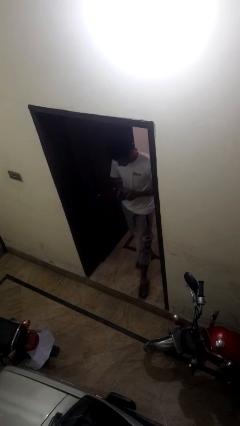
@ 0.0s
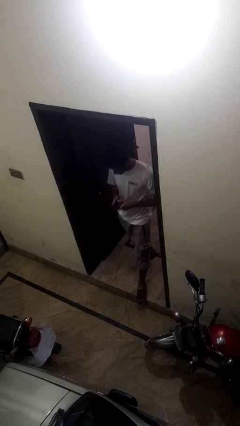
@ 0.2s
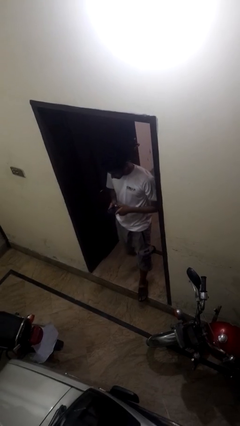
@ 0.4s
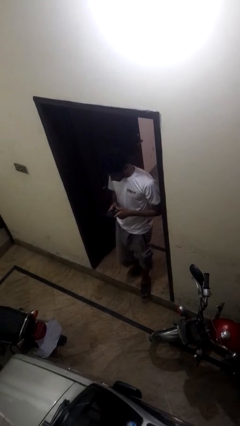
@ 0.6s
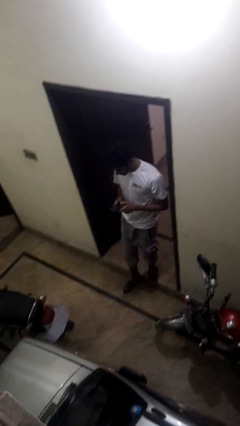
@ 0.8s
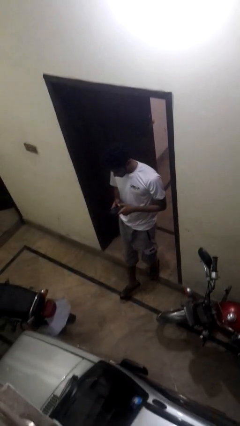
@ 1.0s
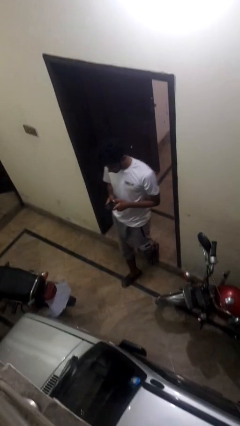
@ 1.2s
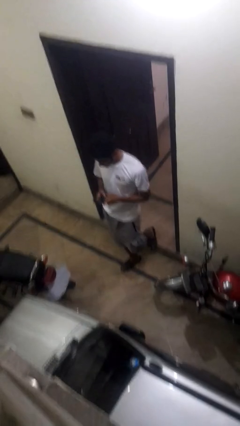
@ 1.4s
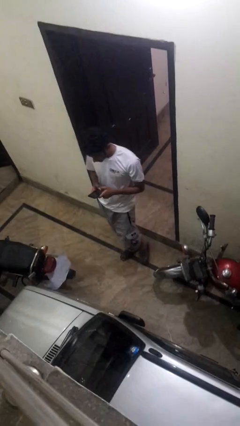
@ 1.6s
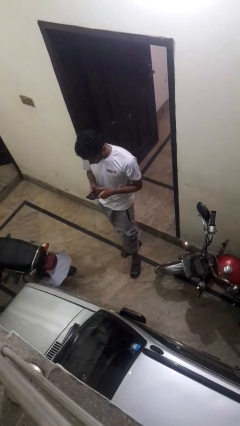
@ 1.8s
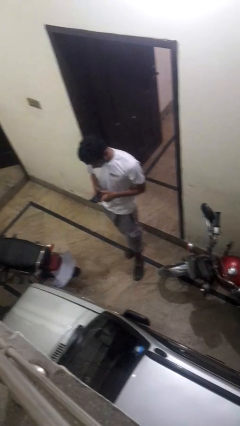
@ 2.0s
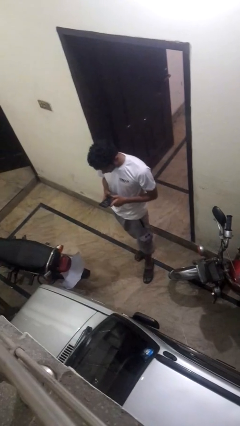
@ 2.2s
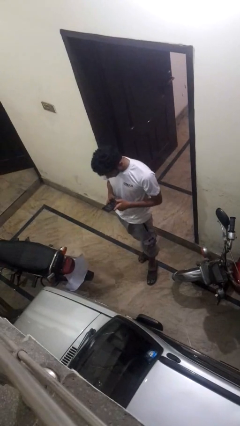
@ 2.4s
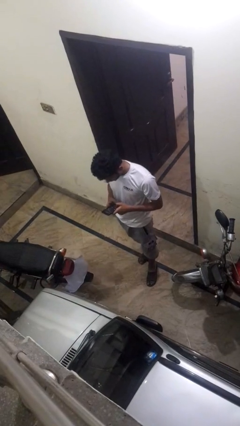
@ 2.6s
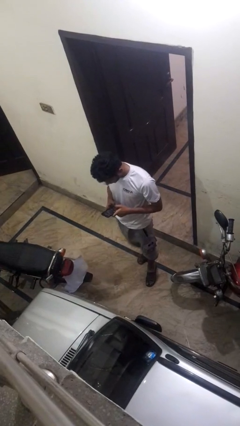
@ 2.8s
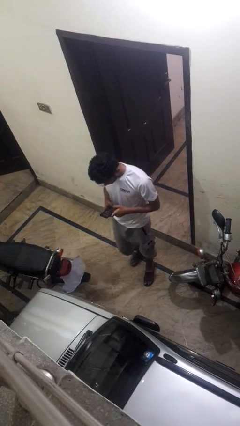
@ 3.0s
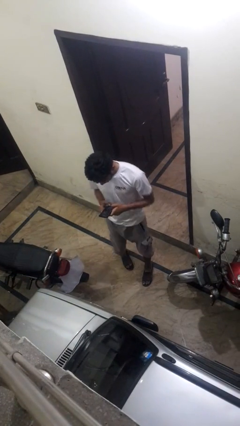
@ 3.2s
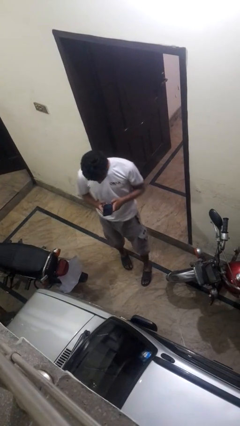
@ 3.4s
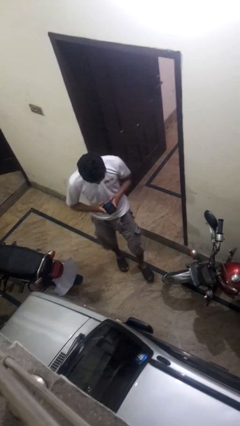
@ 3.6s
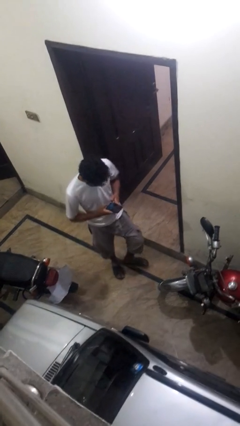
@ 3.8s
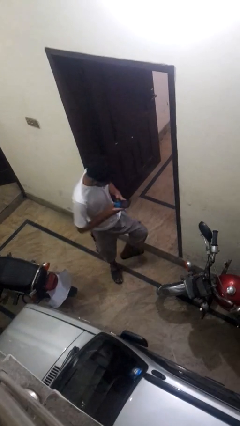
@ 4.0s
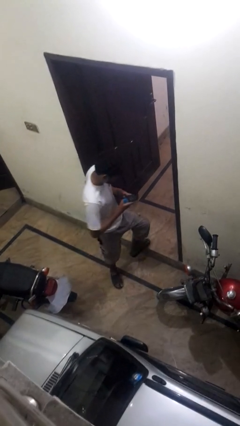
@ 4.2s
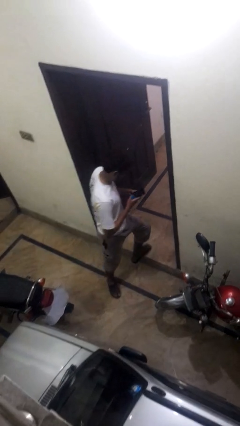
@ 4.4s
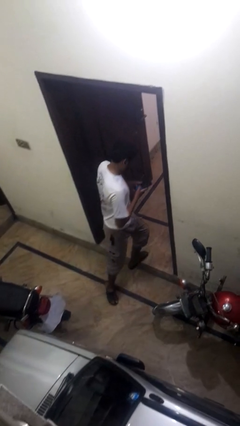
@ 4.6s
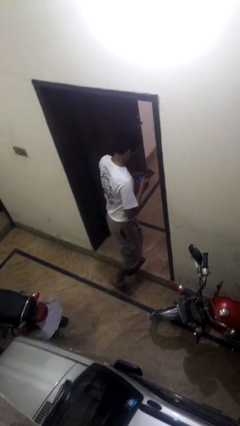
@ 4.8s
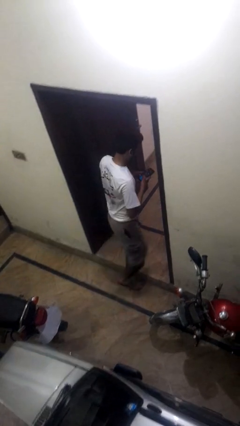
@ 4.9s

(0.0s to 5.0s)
person enters scene through structure

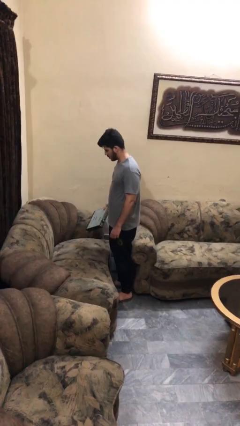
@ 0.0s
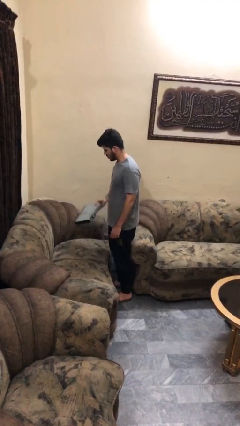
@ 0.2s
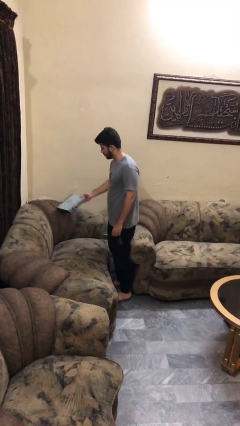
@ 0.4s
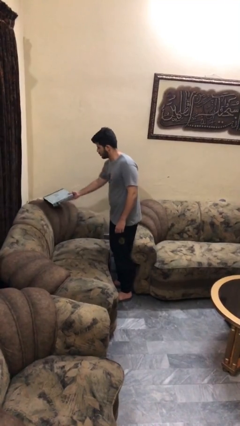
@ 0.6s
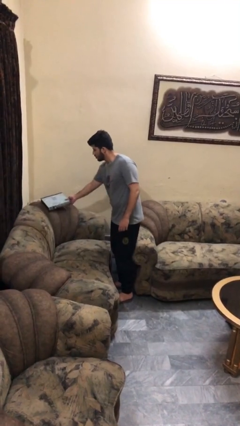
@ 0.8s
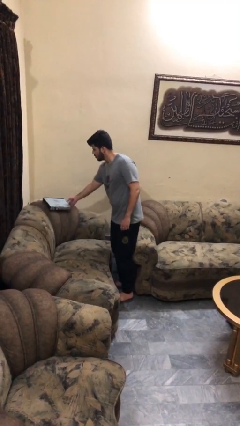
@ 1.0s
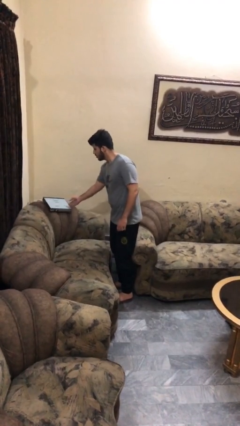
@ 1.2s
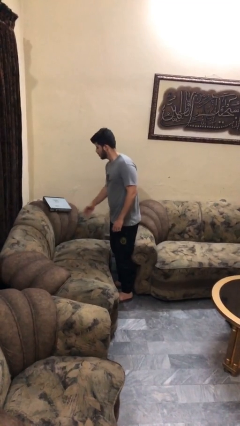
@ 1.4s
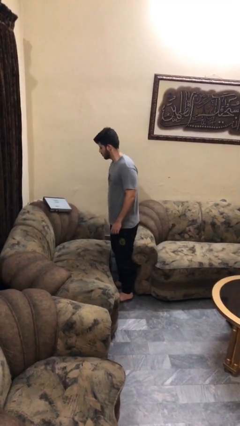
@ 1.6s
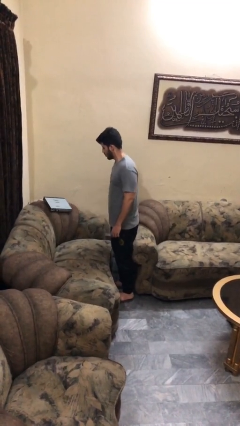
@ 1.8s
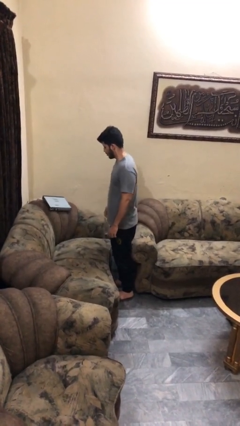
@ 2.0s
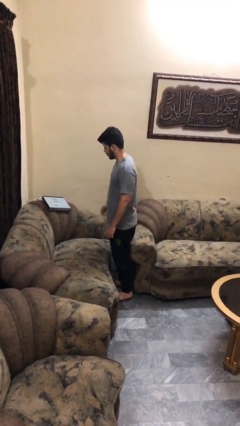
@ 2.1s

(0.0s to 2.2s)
person puts down object on couch

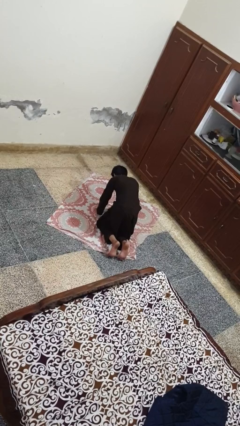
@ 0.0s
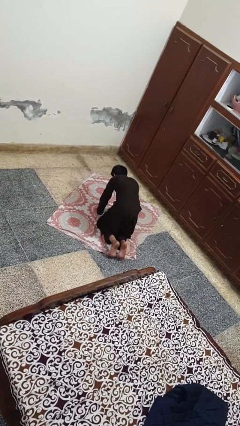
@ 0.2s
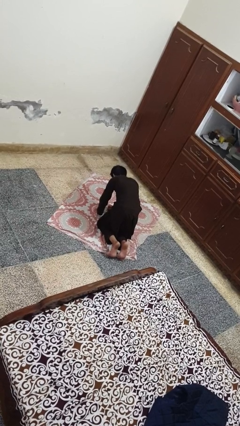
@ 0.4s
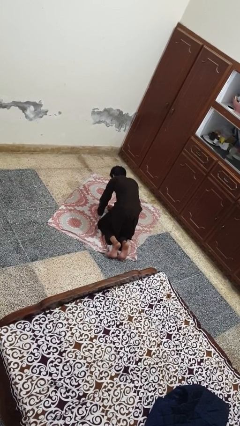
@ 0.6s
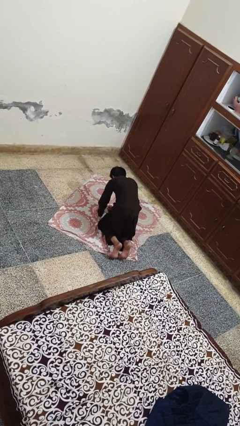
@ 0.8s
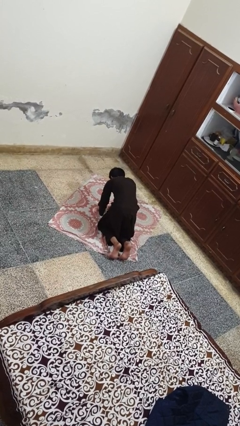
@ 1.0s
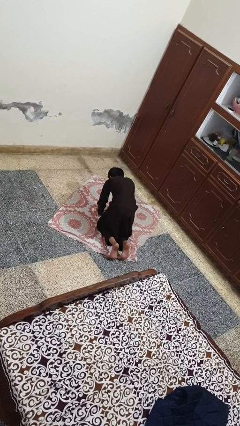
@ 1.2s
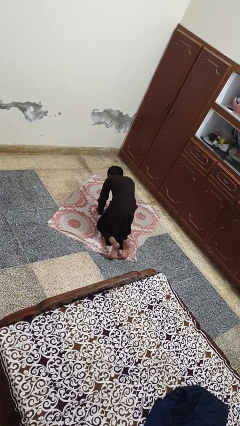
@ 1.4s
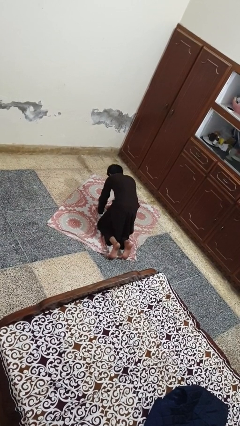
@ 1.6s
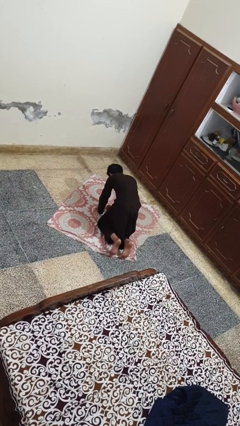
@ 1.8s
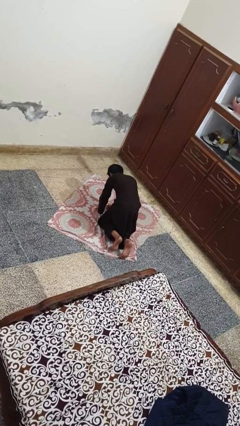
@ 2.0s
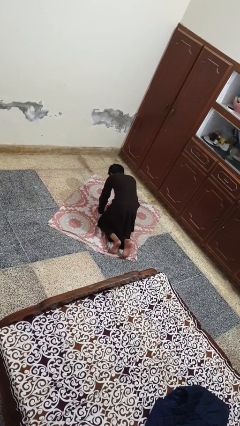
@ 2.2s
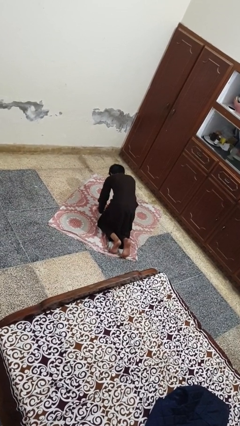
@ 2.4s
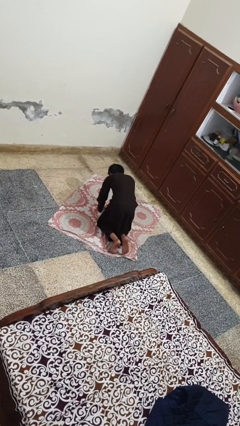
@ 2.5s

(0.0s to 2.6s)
person crawls

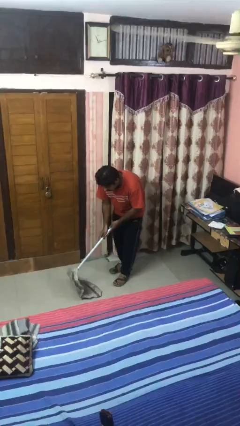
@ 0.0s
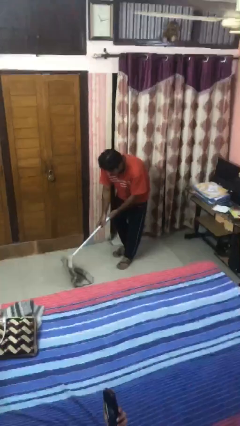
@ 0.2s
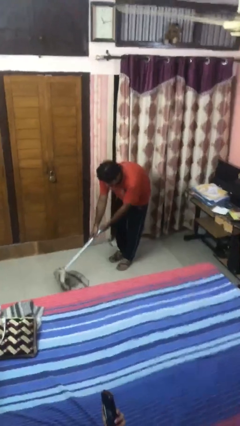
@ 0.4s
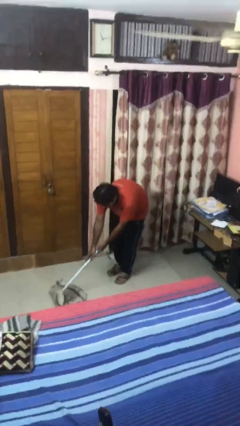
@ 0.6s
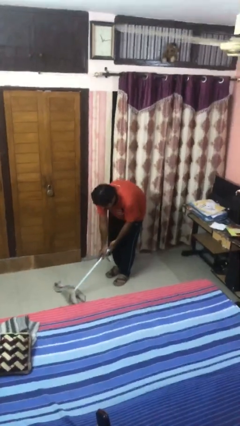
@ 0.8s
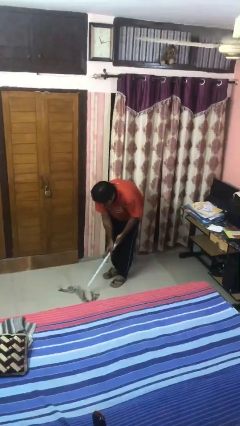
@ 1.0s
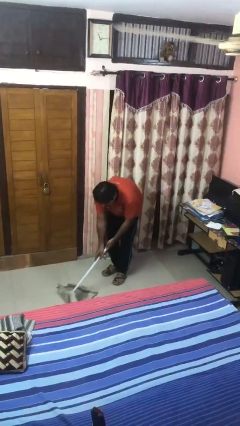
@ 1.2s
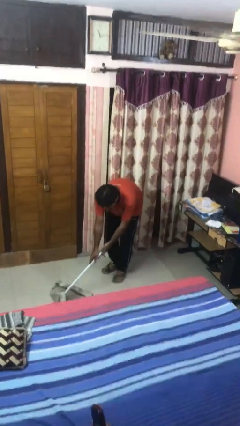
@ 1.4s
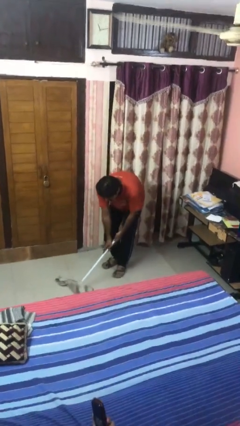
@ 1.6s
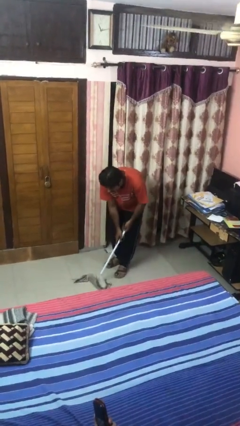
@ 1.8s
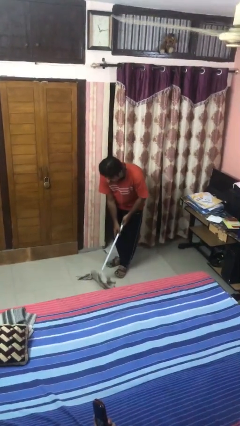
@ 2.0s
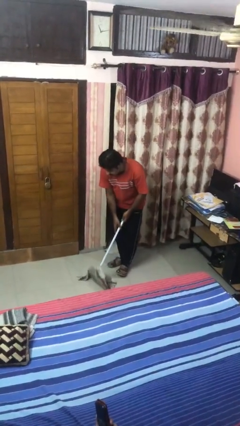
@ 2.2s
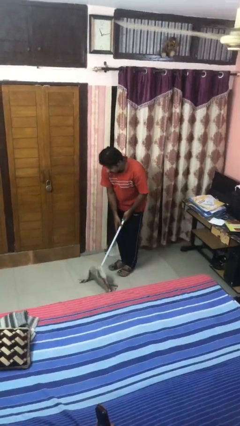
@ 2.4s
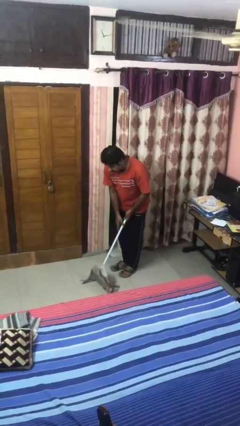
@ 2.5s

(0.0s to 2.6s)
person mops

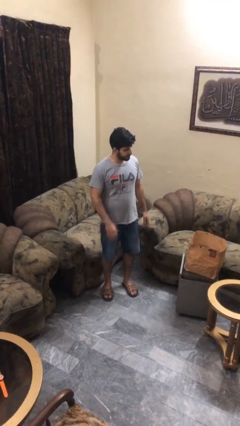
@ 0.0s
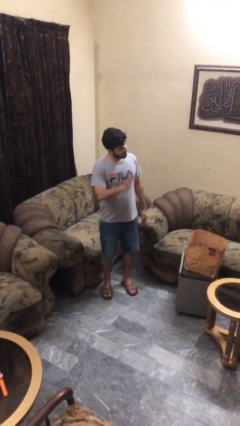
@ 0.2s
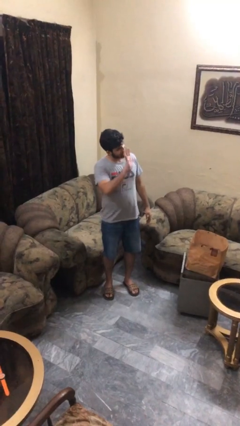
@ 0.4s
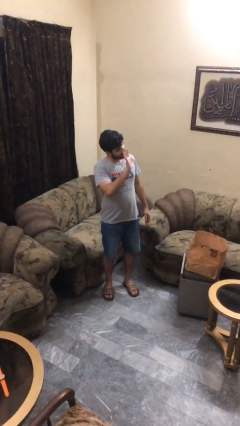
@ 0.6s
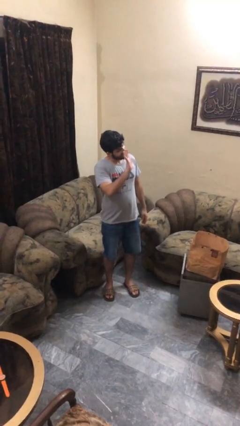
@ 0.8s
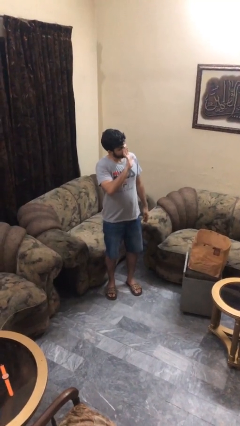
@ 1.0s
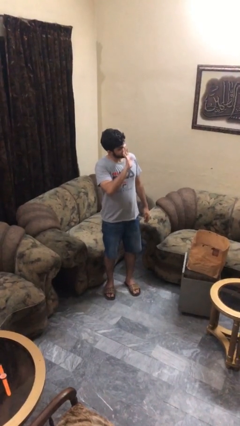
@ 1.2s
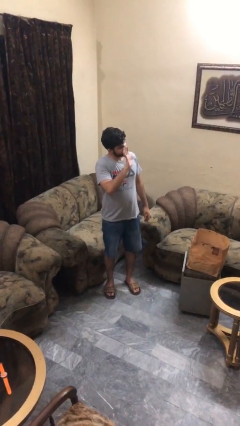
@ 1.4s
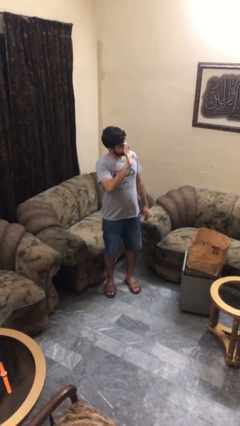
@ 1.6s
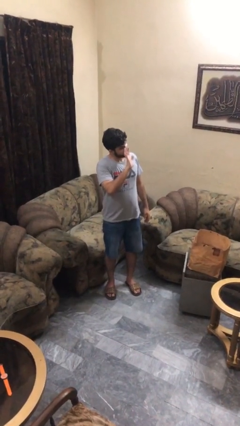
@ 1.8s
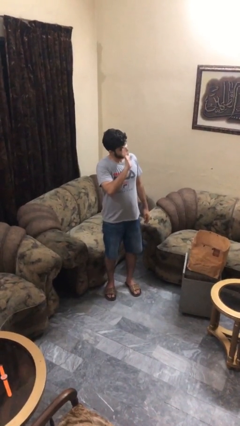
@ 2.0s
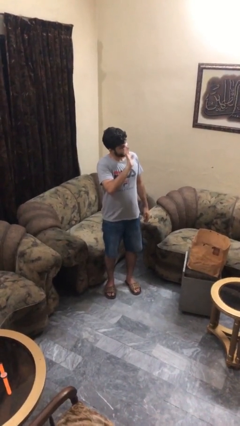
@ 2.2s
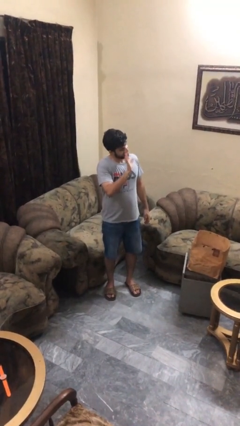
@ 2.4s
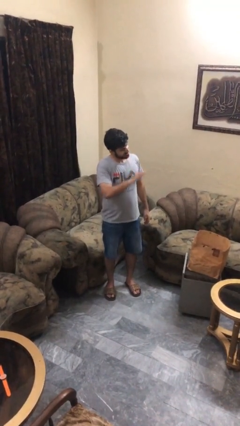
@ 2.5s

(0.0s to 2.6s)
person waves at person

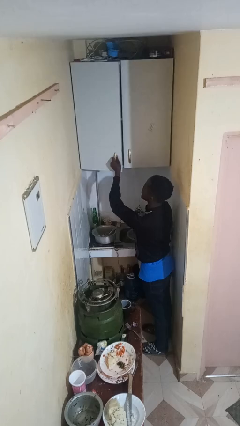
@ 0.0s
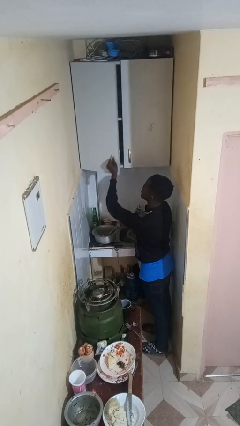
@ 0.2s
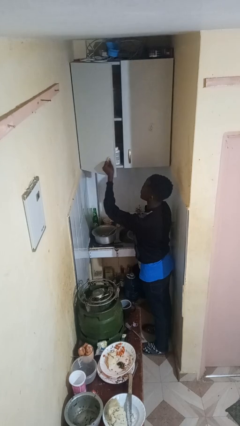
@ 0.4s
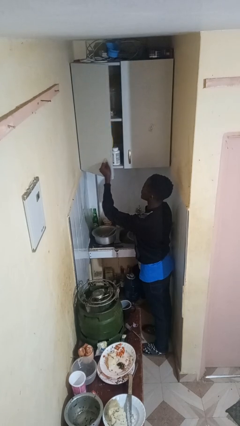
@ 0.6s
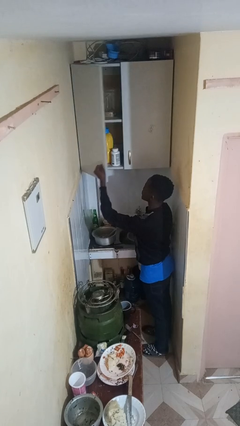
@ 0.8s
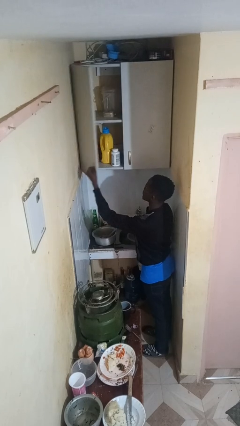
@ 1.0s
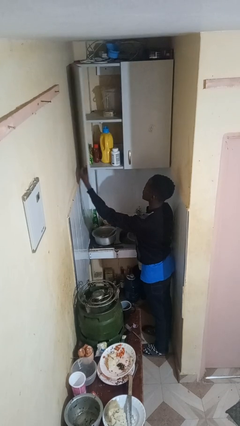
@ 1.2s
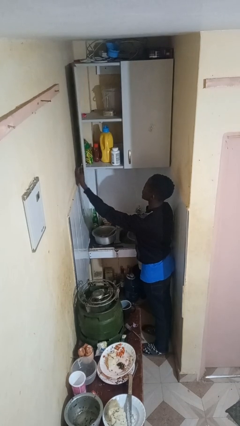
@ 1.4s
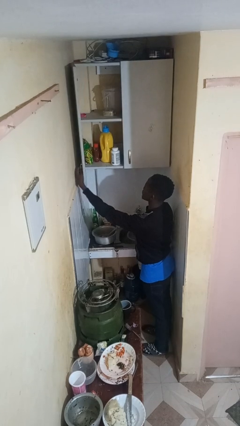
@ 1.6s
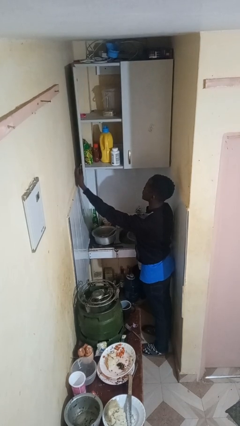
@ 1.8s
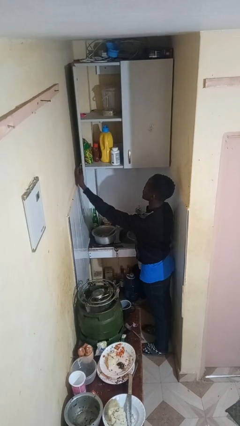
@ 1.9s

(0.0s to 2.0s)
person opens kitchen drawer

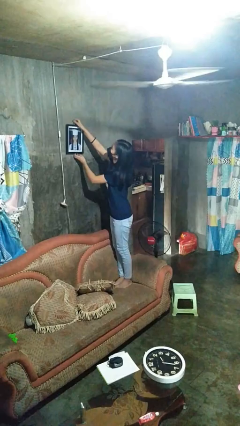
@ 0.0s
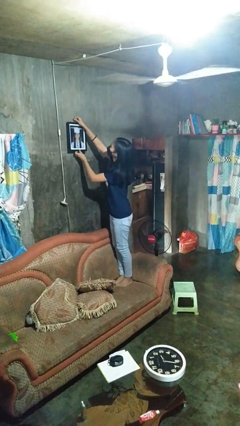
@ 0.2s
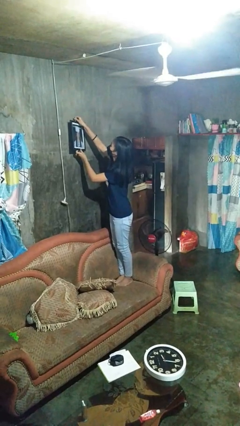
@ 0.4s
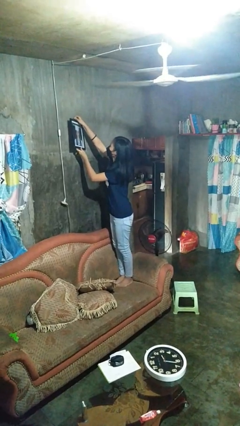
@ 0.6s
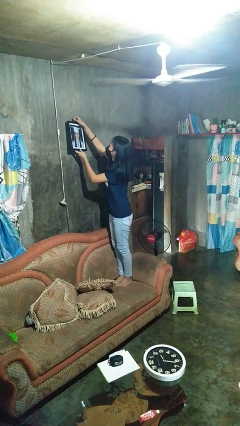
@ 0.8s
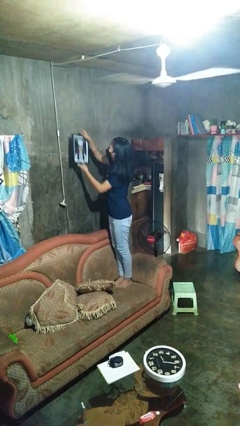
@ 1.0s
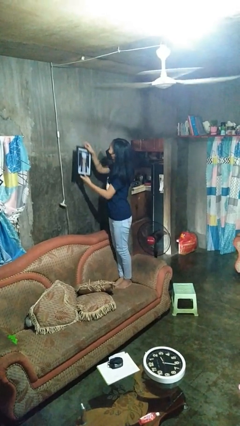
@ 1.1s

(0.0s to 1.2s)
person takes down picture frame
